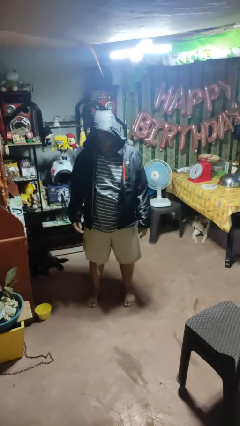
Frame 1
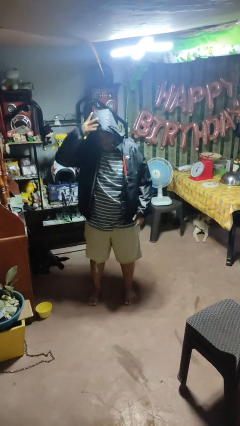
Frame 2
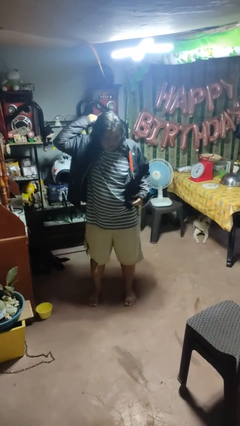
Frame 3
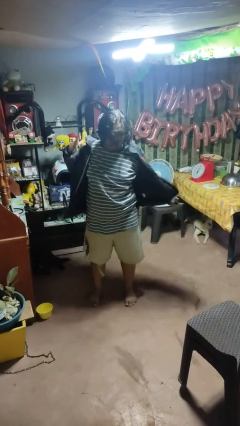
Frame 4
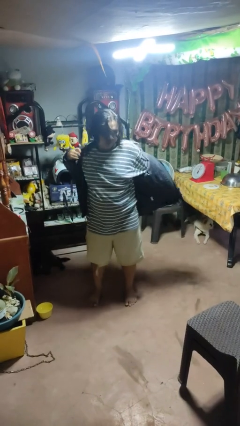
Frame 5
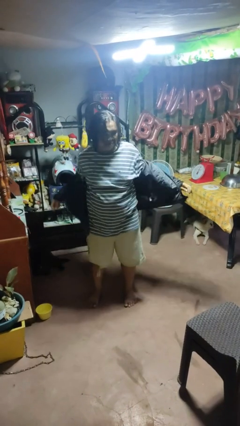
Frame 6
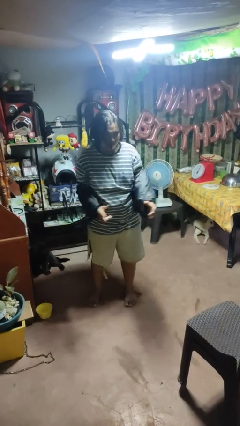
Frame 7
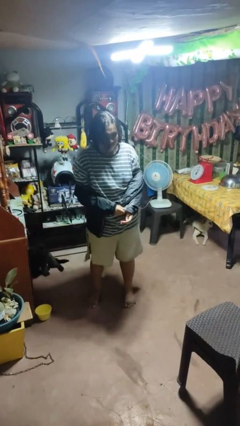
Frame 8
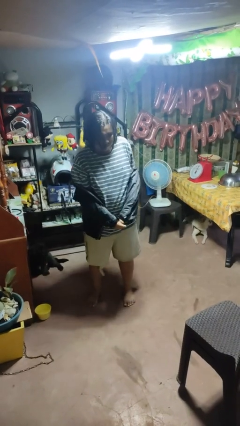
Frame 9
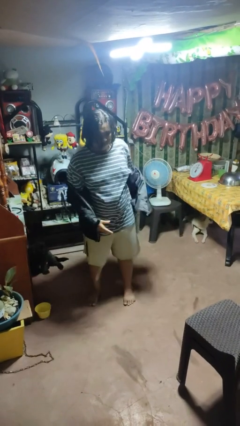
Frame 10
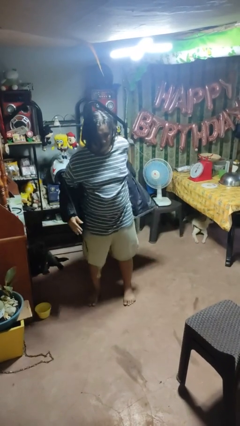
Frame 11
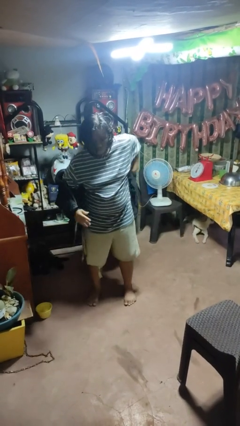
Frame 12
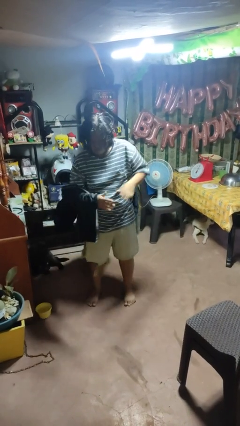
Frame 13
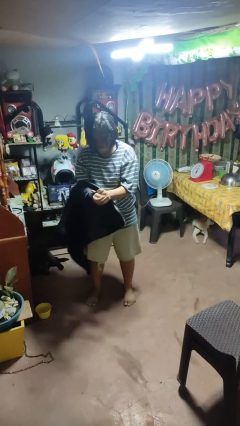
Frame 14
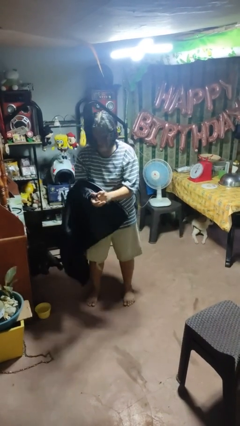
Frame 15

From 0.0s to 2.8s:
person takes off hoodie

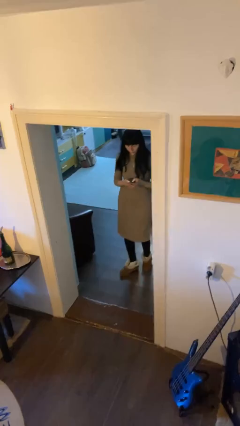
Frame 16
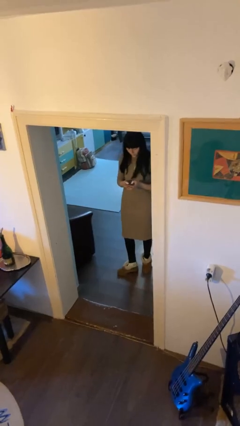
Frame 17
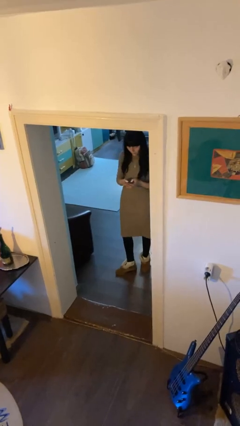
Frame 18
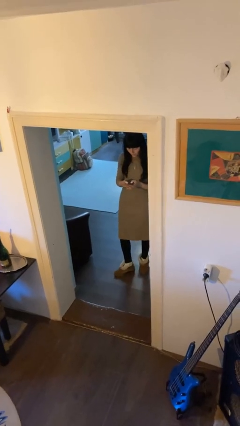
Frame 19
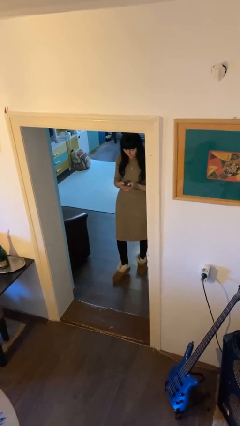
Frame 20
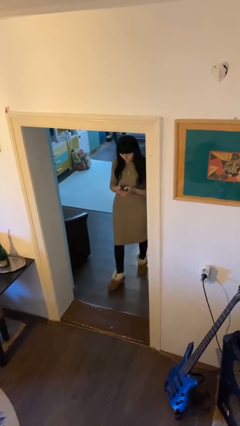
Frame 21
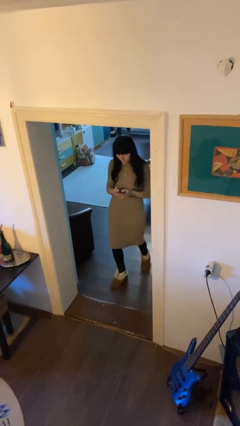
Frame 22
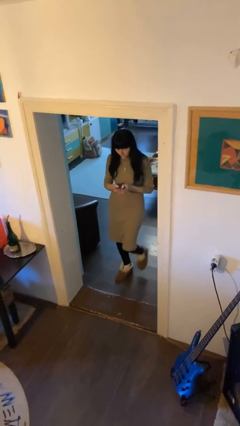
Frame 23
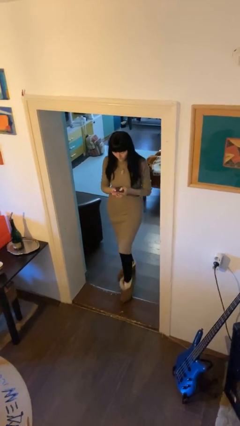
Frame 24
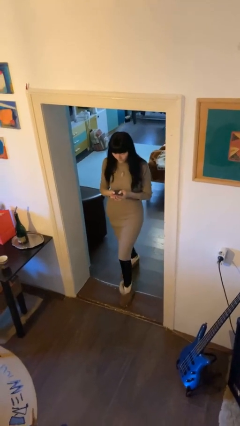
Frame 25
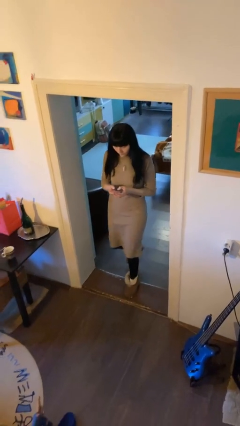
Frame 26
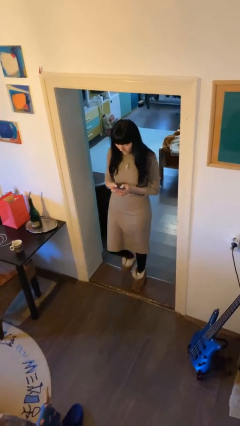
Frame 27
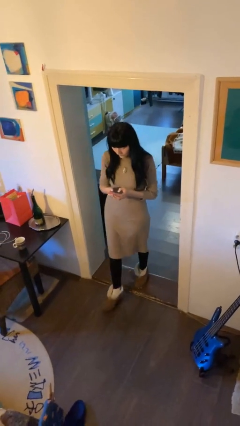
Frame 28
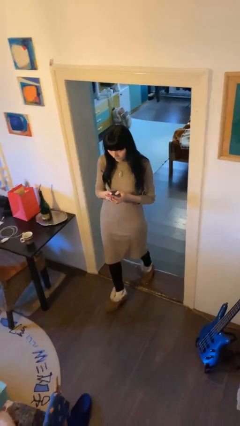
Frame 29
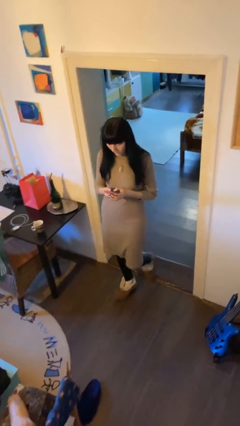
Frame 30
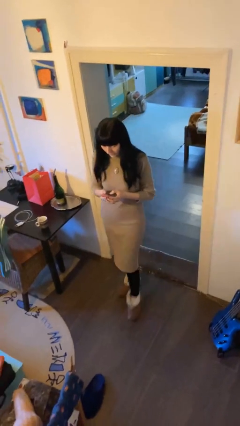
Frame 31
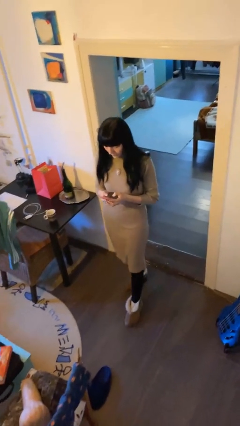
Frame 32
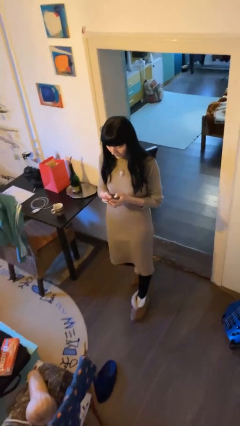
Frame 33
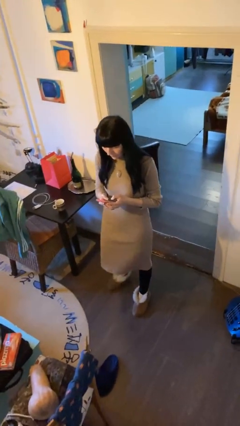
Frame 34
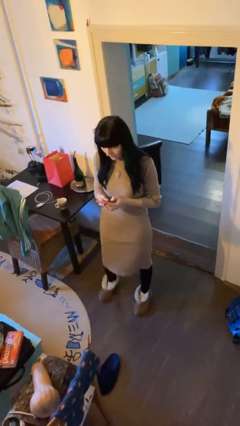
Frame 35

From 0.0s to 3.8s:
person enters scene through structure

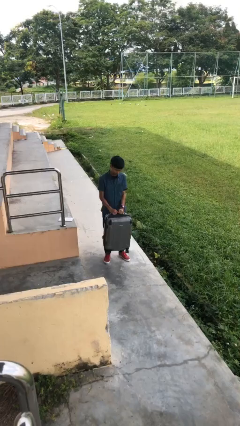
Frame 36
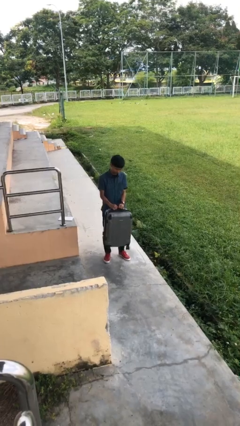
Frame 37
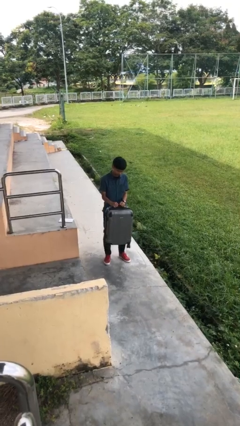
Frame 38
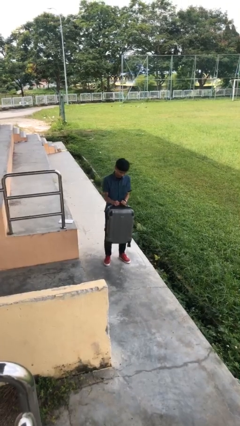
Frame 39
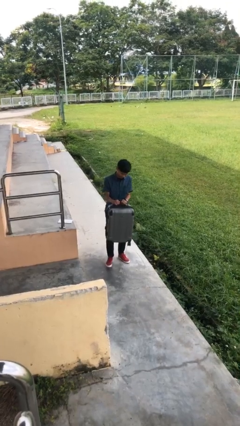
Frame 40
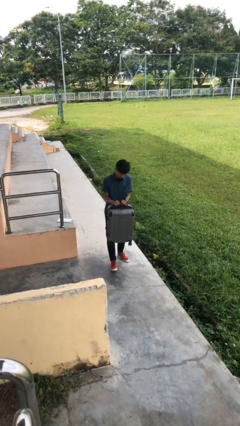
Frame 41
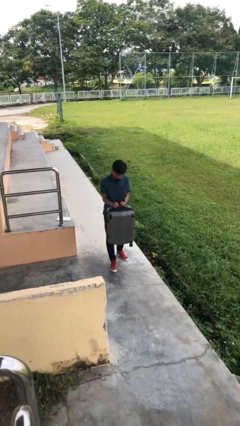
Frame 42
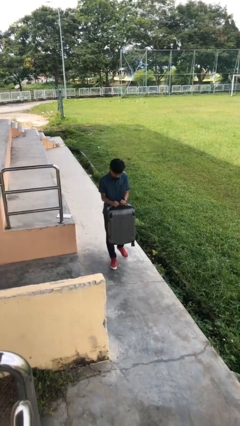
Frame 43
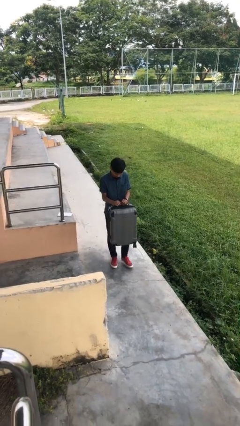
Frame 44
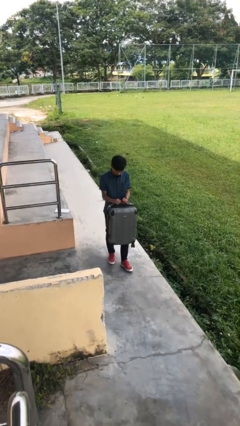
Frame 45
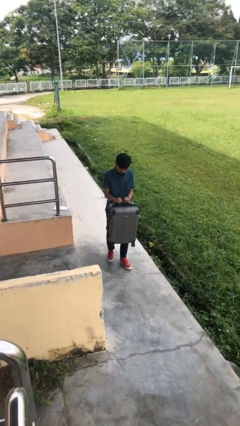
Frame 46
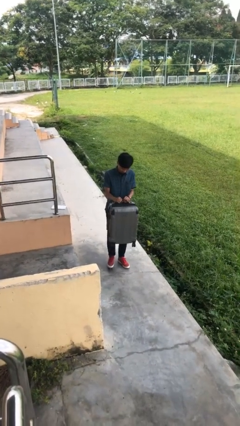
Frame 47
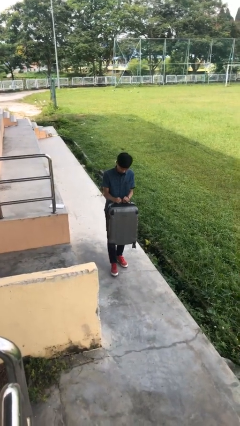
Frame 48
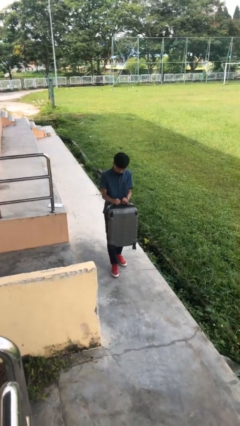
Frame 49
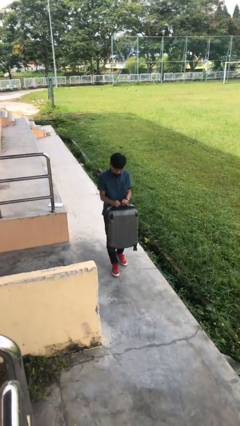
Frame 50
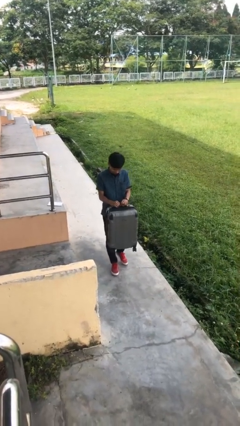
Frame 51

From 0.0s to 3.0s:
person carries heavy object

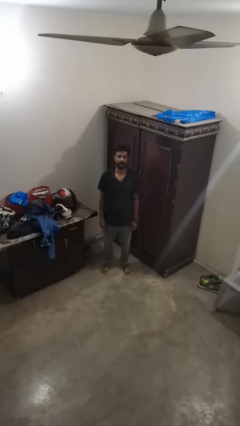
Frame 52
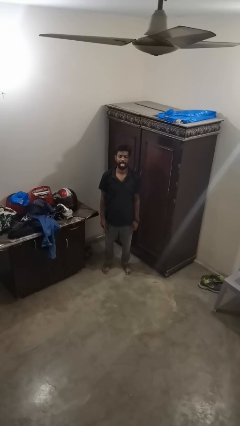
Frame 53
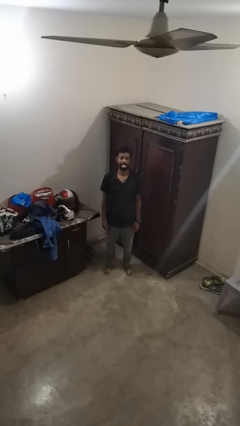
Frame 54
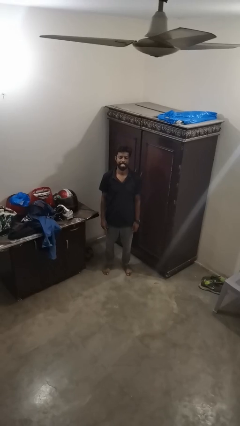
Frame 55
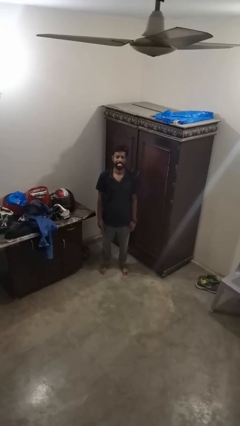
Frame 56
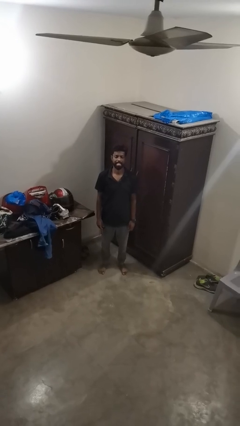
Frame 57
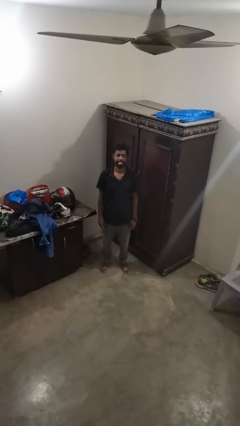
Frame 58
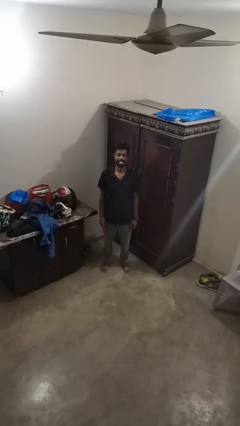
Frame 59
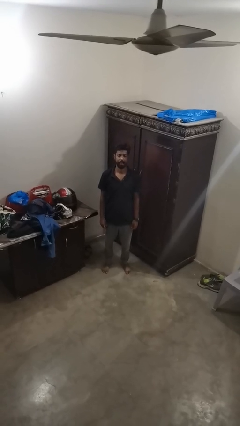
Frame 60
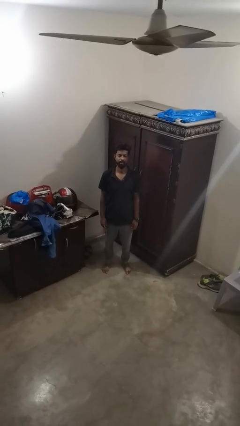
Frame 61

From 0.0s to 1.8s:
person sticks out tongue

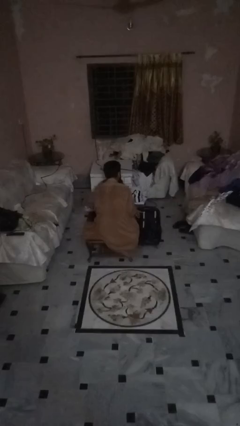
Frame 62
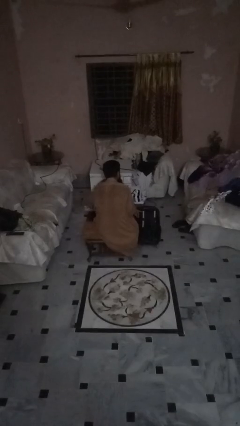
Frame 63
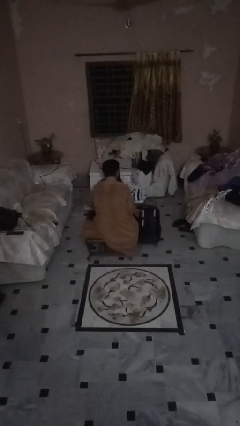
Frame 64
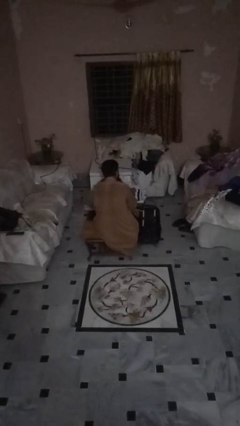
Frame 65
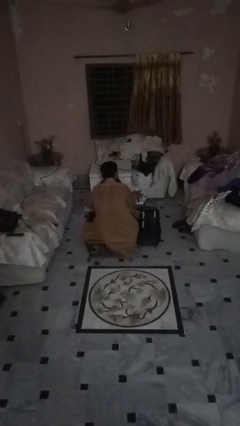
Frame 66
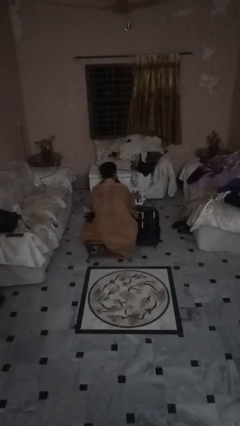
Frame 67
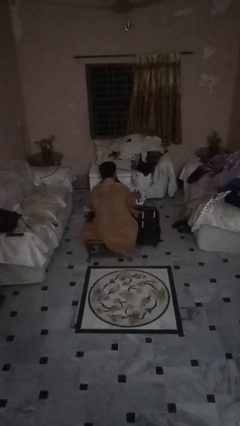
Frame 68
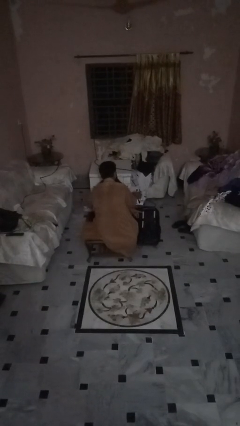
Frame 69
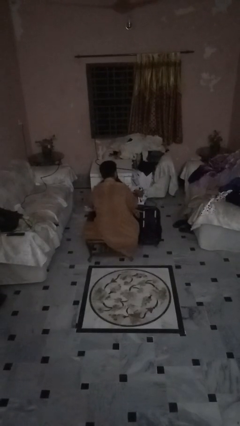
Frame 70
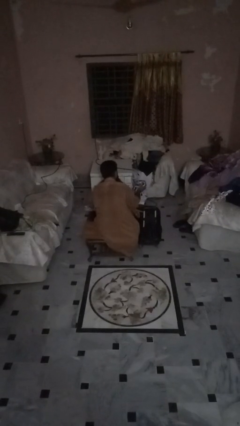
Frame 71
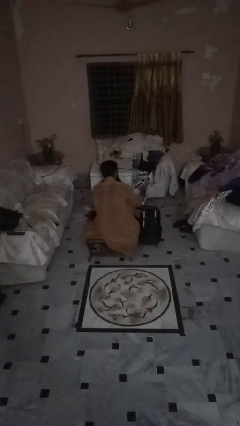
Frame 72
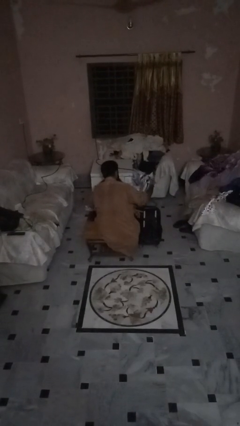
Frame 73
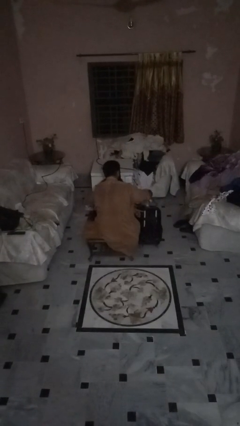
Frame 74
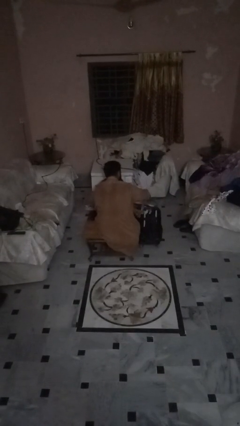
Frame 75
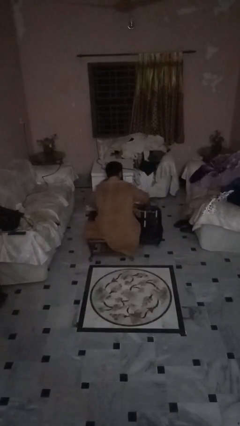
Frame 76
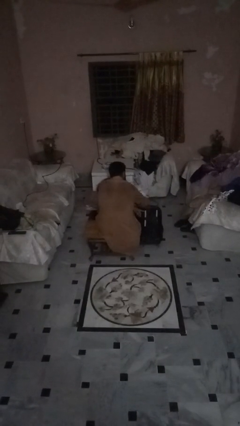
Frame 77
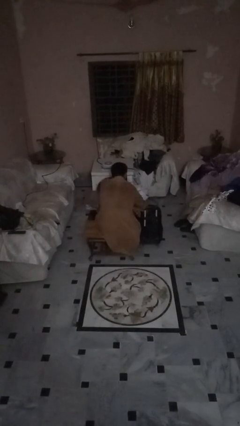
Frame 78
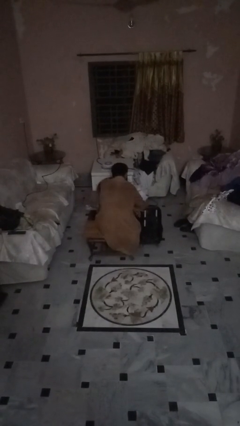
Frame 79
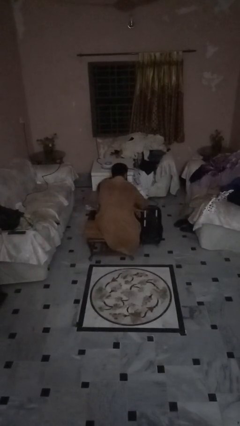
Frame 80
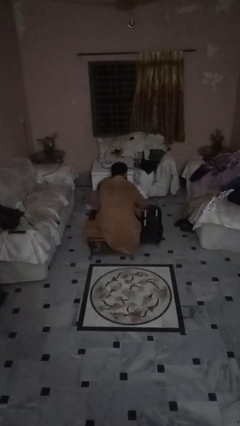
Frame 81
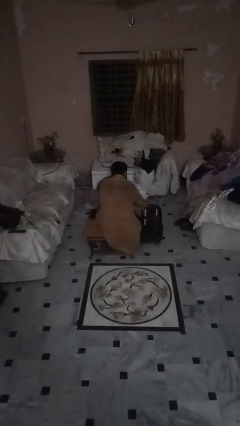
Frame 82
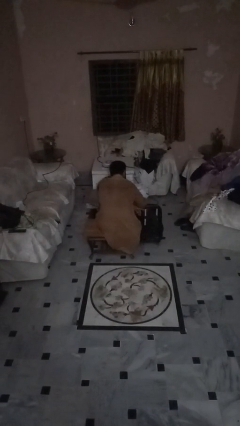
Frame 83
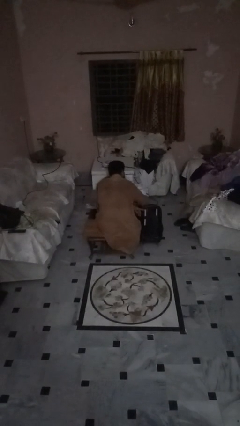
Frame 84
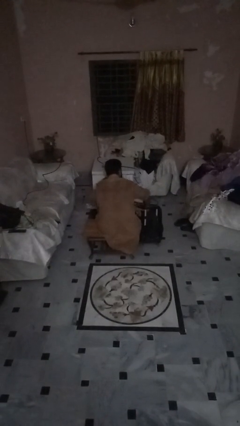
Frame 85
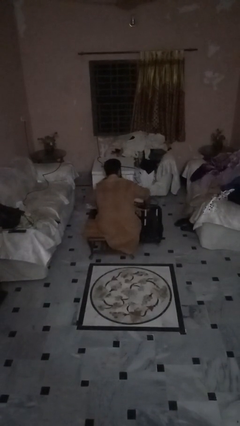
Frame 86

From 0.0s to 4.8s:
person loads clothes into suitcase

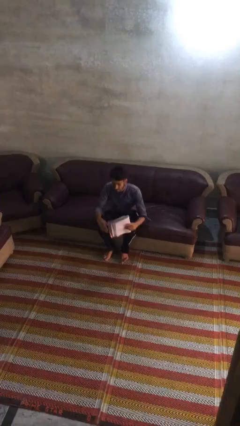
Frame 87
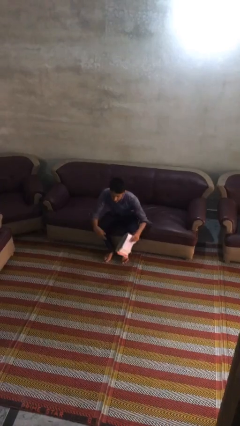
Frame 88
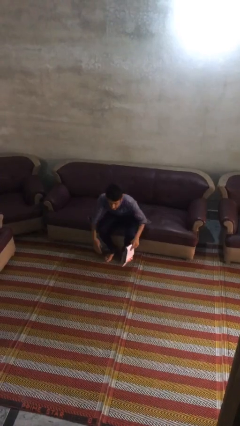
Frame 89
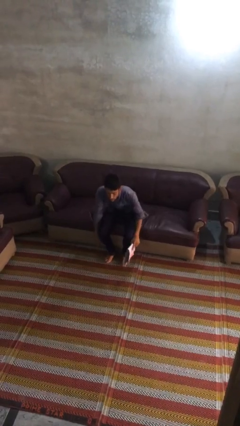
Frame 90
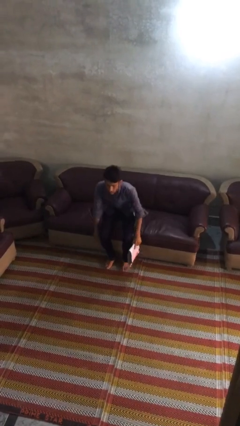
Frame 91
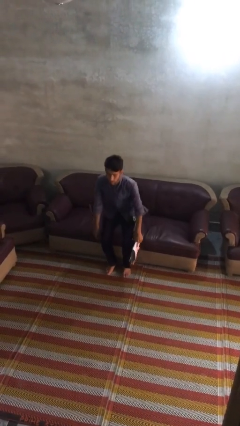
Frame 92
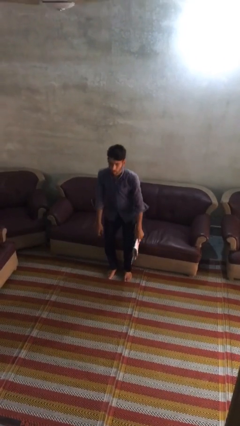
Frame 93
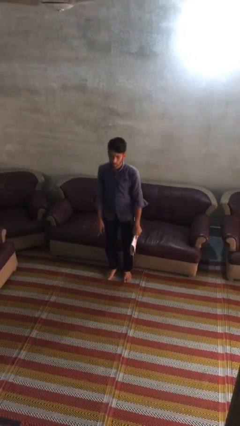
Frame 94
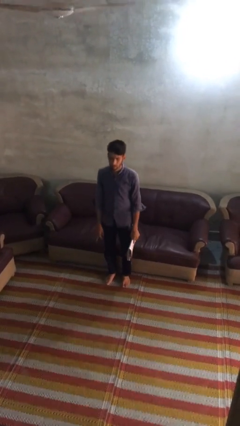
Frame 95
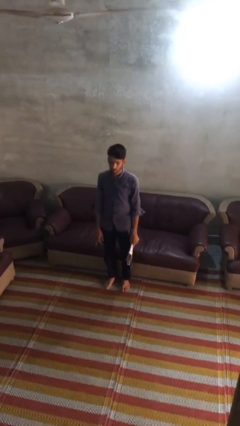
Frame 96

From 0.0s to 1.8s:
person stands up
